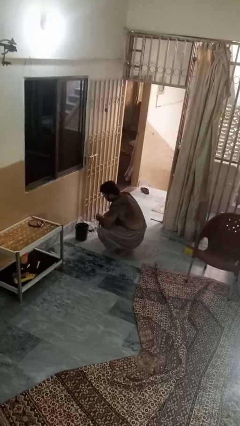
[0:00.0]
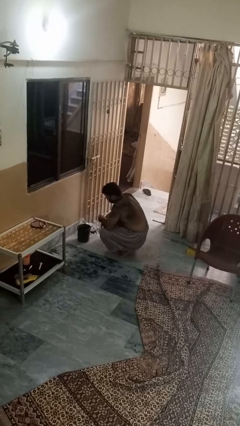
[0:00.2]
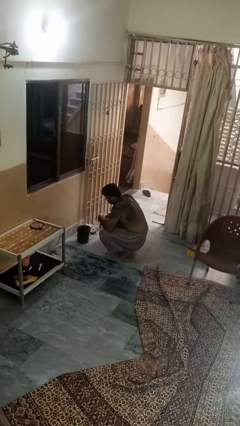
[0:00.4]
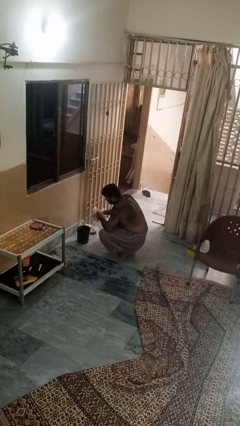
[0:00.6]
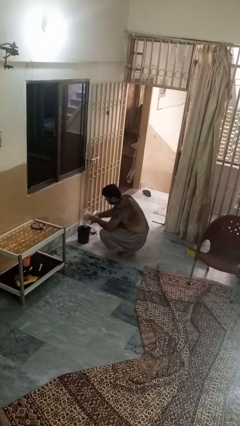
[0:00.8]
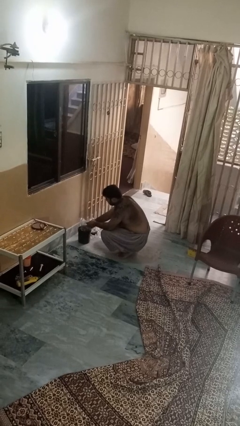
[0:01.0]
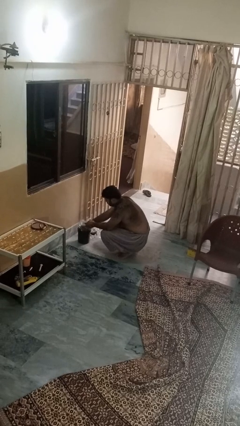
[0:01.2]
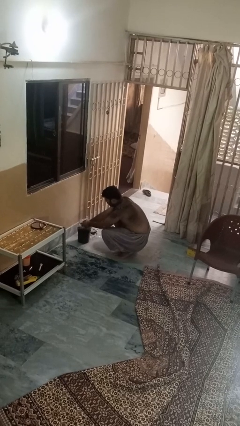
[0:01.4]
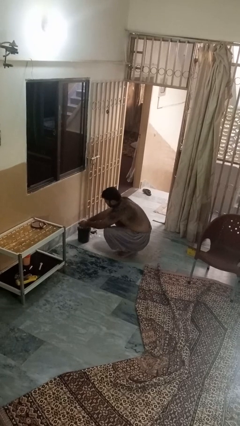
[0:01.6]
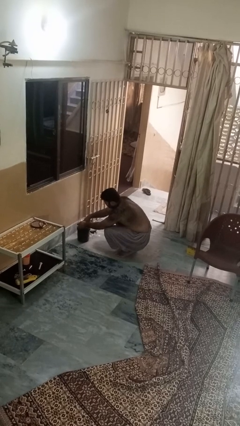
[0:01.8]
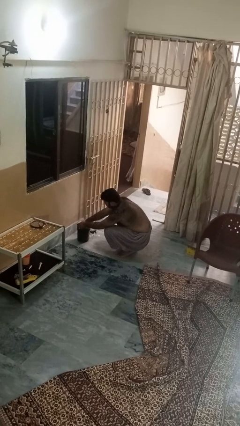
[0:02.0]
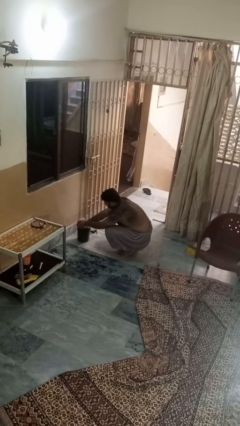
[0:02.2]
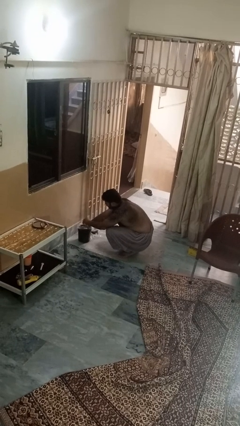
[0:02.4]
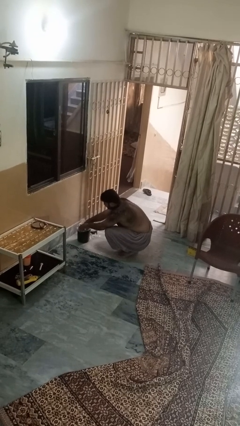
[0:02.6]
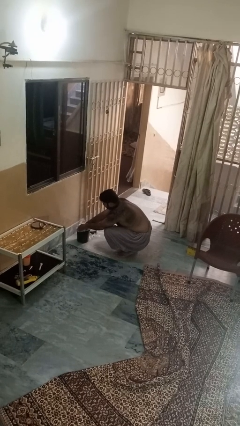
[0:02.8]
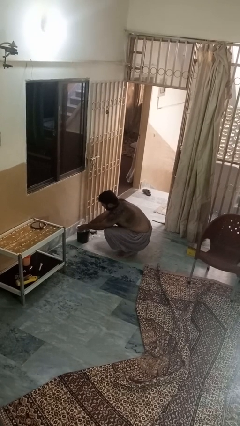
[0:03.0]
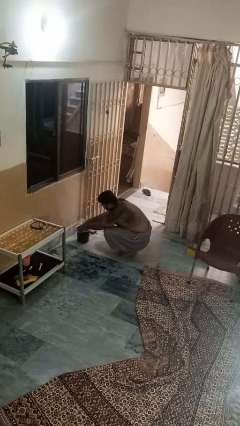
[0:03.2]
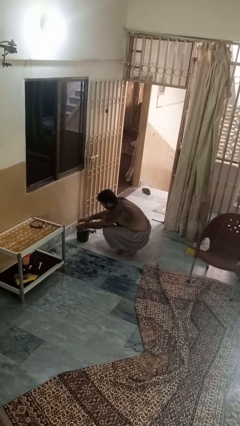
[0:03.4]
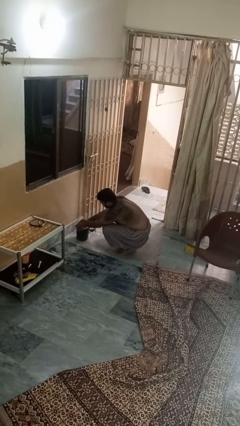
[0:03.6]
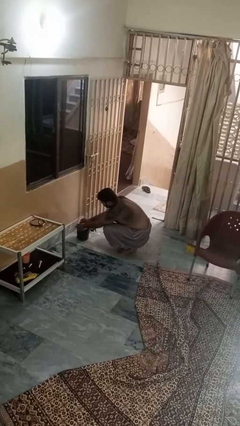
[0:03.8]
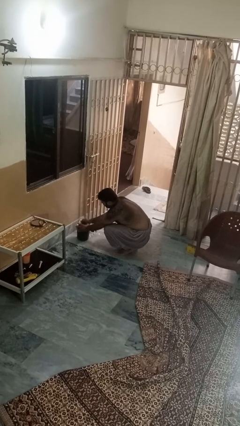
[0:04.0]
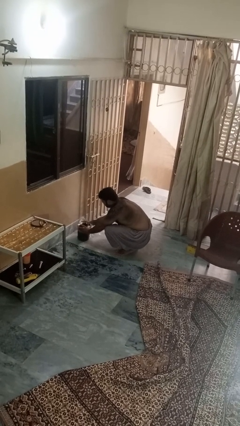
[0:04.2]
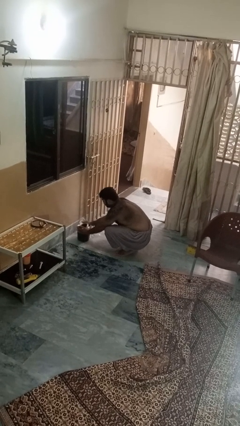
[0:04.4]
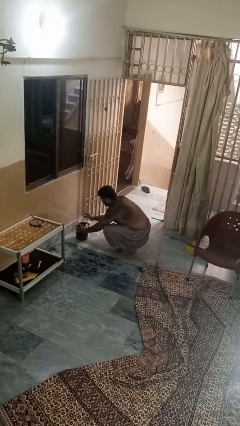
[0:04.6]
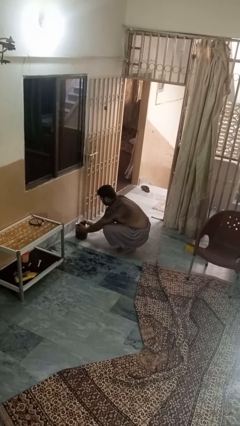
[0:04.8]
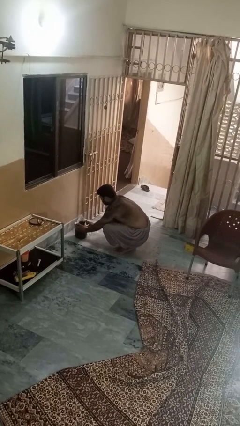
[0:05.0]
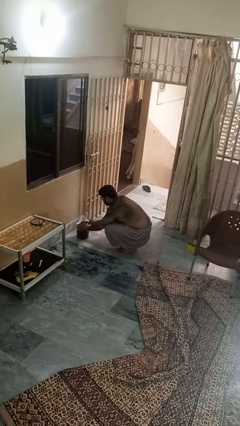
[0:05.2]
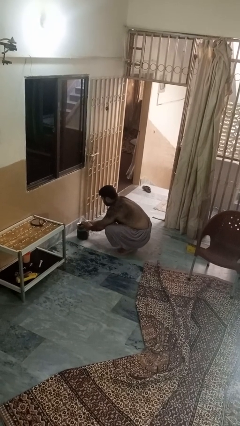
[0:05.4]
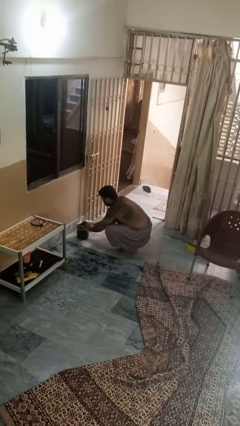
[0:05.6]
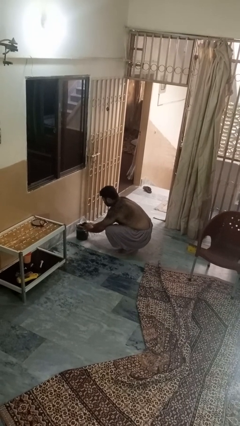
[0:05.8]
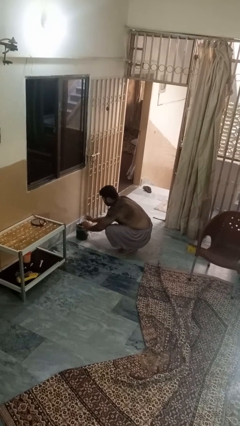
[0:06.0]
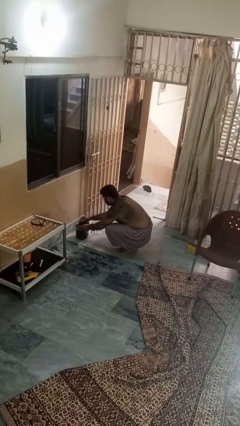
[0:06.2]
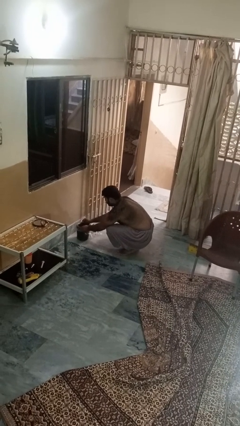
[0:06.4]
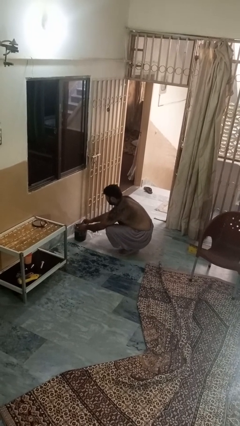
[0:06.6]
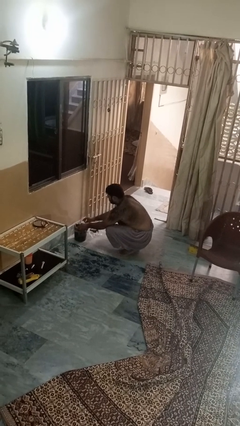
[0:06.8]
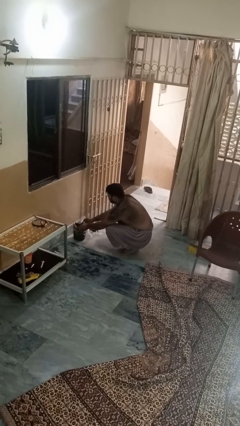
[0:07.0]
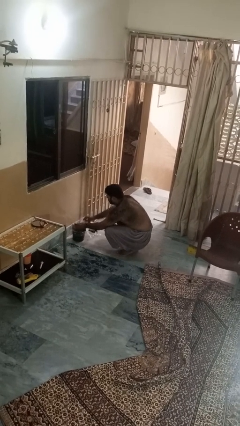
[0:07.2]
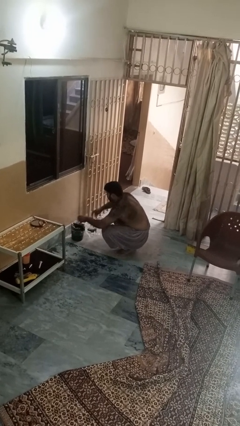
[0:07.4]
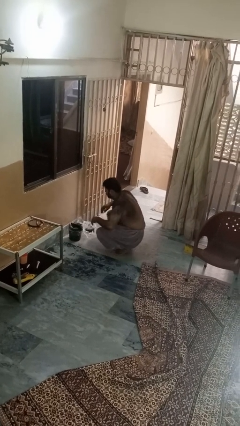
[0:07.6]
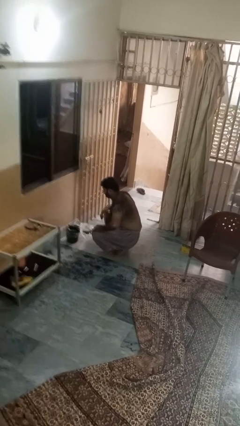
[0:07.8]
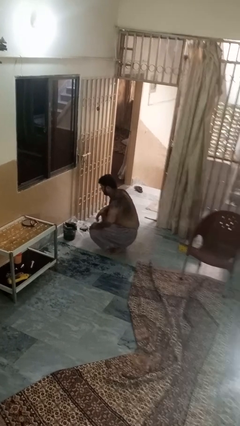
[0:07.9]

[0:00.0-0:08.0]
person inserts trashbag into trashcan

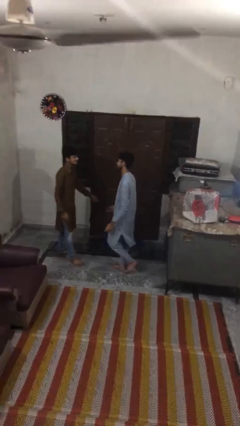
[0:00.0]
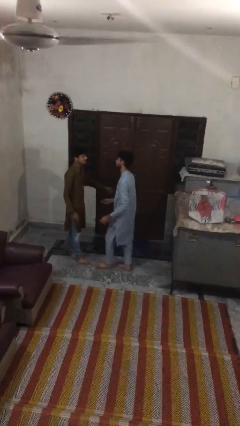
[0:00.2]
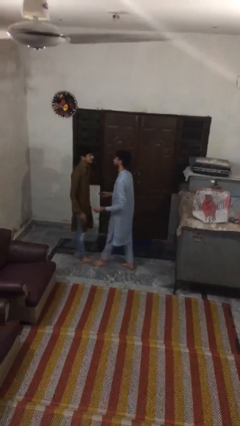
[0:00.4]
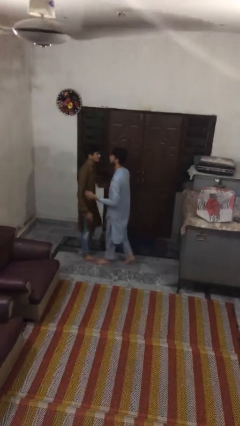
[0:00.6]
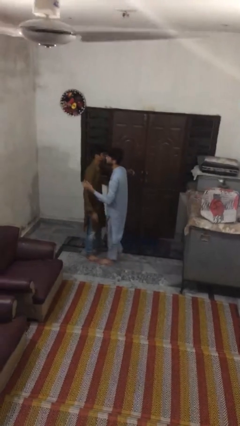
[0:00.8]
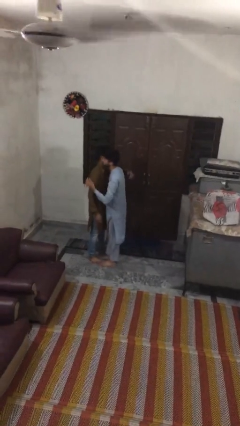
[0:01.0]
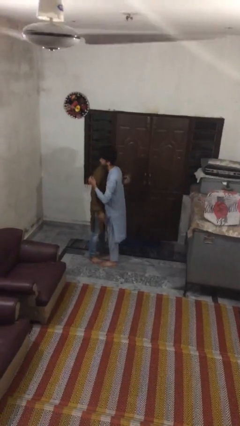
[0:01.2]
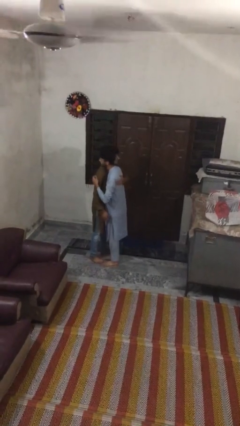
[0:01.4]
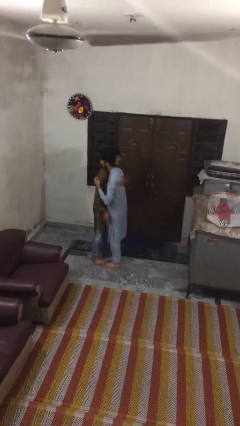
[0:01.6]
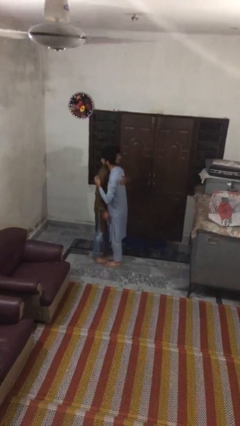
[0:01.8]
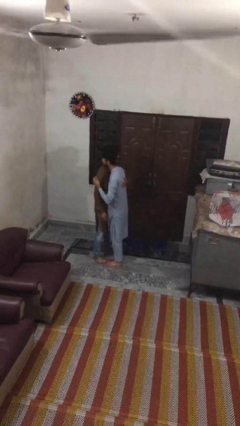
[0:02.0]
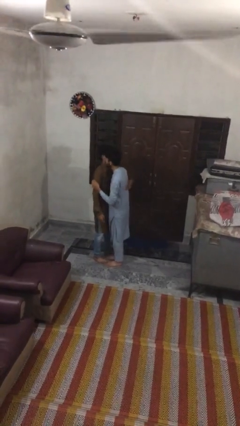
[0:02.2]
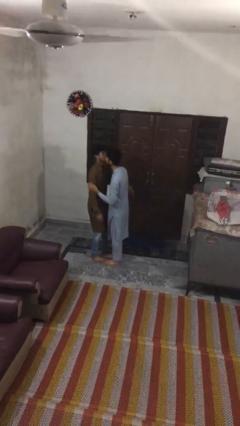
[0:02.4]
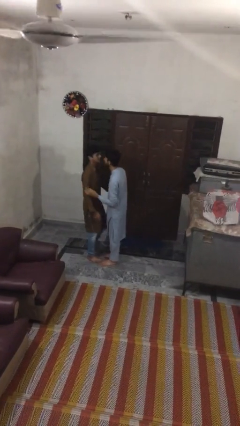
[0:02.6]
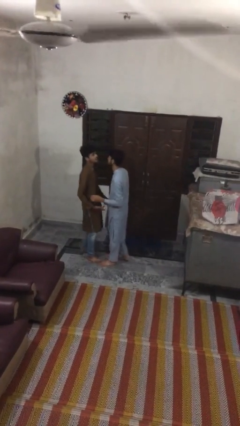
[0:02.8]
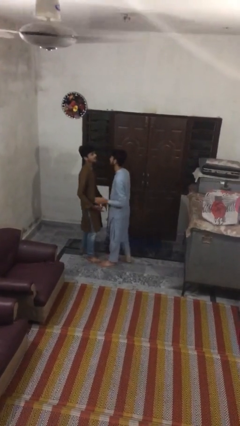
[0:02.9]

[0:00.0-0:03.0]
person embraces person

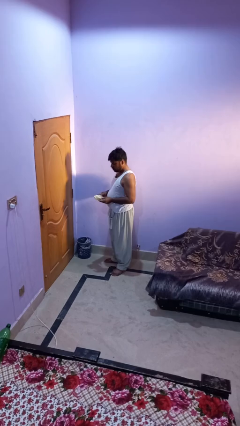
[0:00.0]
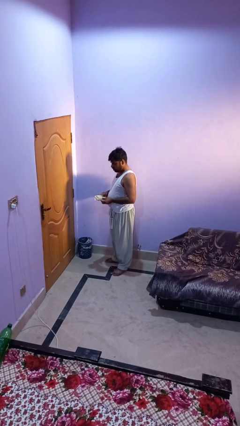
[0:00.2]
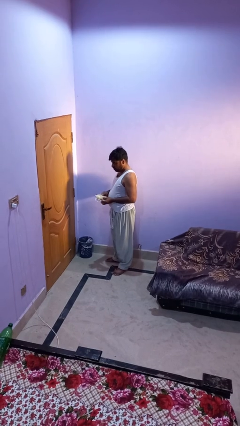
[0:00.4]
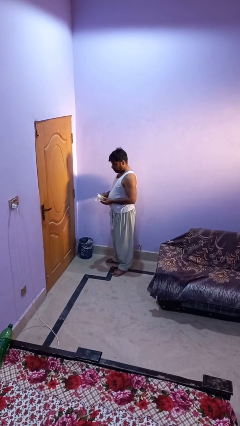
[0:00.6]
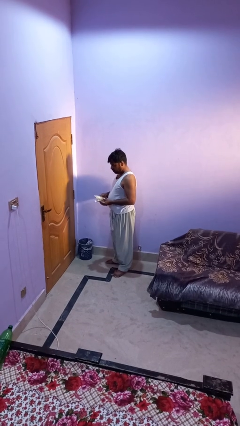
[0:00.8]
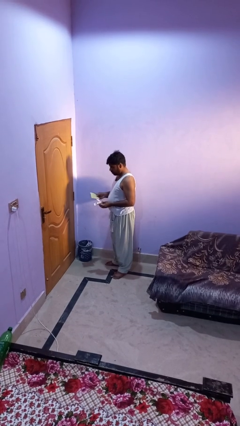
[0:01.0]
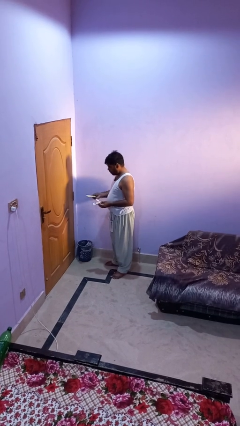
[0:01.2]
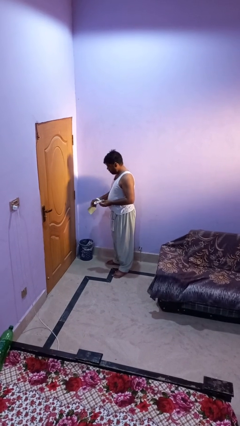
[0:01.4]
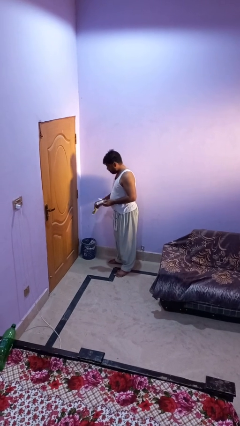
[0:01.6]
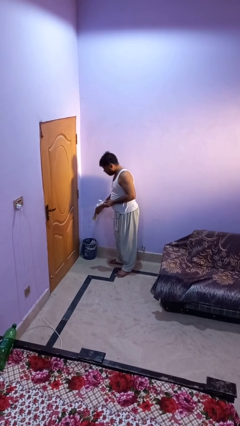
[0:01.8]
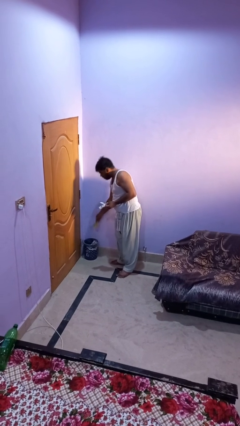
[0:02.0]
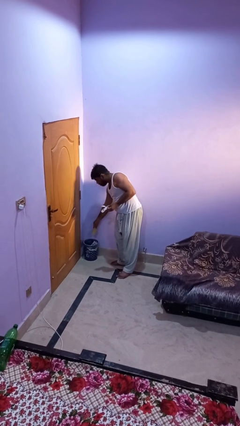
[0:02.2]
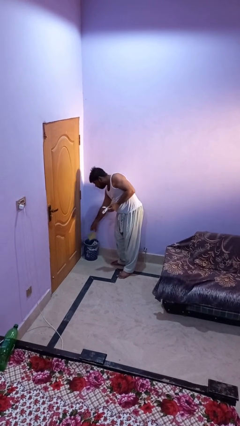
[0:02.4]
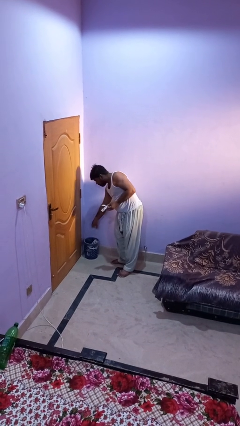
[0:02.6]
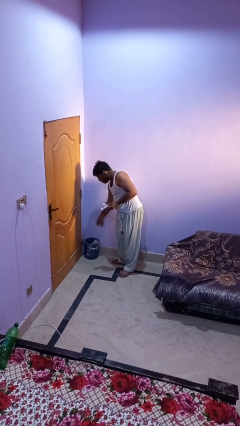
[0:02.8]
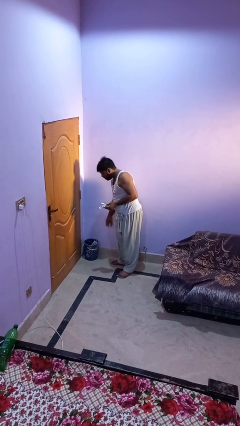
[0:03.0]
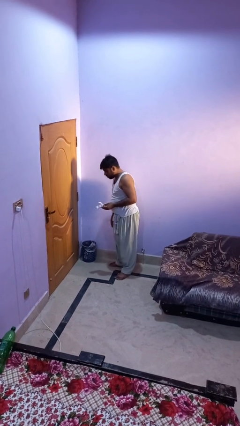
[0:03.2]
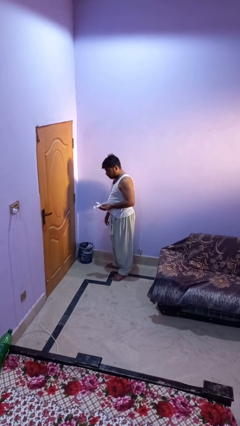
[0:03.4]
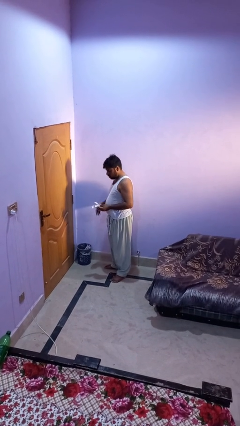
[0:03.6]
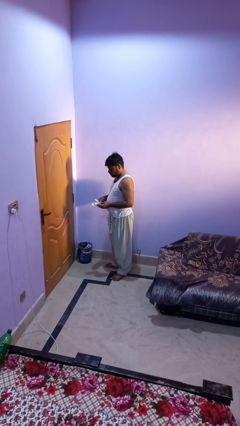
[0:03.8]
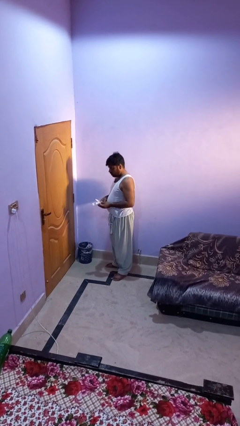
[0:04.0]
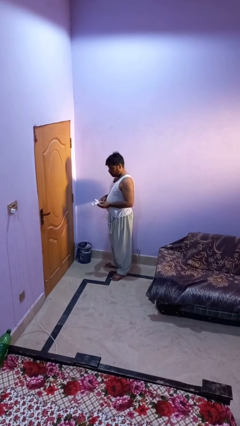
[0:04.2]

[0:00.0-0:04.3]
person discards trash

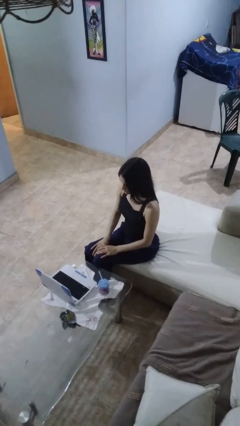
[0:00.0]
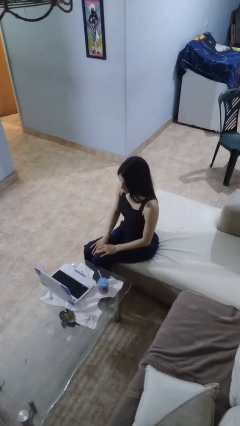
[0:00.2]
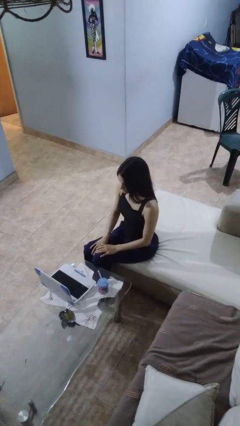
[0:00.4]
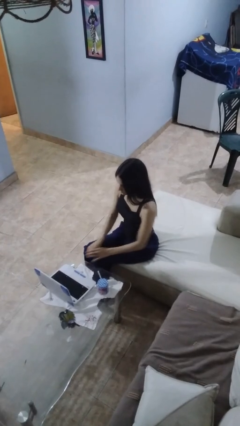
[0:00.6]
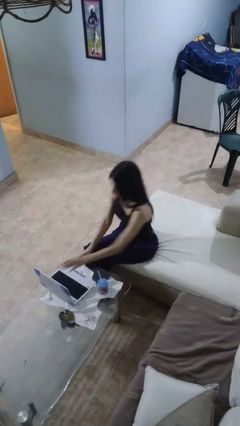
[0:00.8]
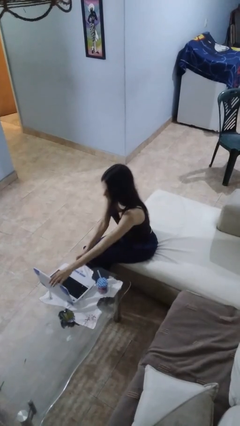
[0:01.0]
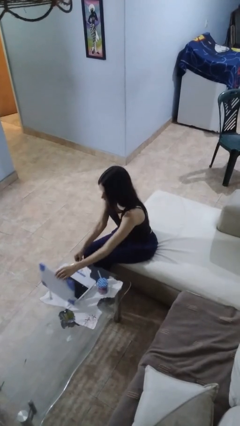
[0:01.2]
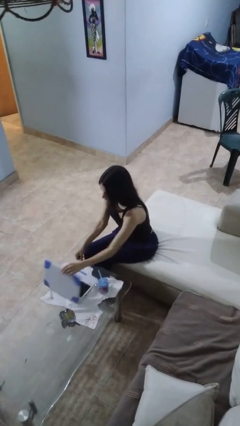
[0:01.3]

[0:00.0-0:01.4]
person closes laptop

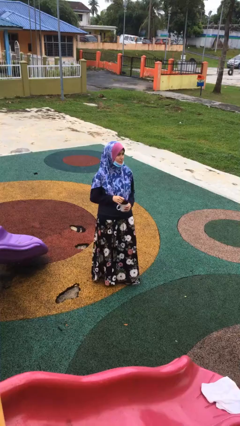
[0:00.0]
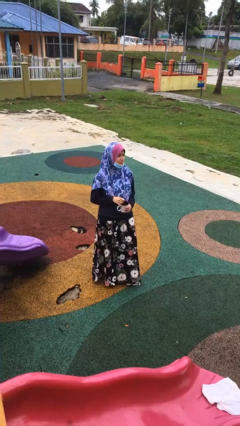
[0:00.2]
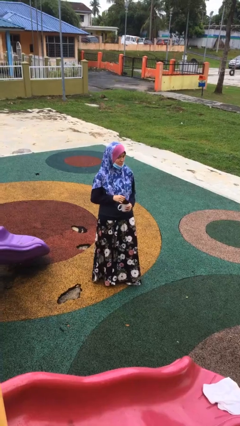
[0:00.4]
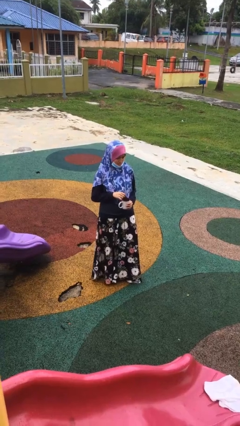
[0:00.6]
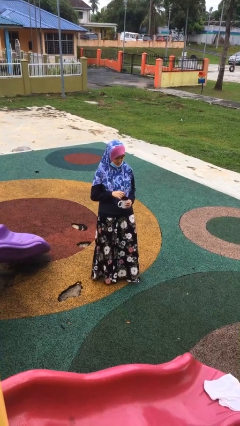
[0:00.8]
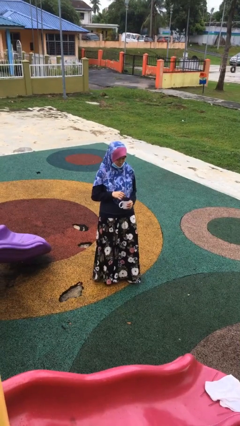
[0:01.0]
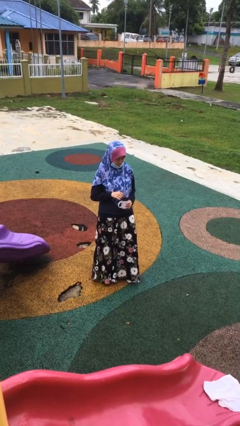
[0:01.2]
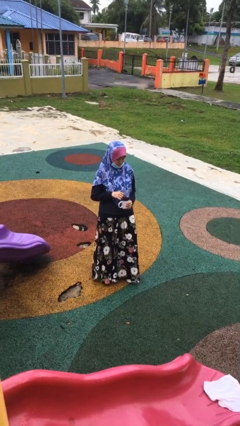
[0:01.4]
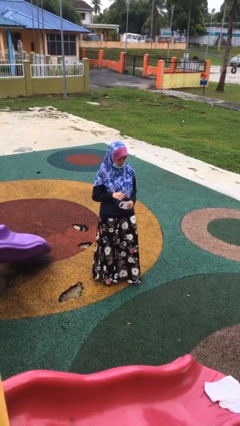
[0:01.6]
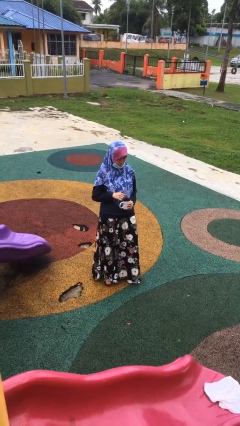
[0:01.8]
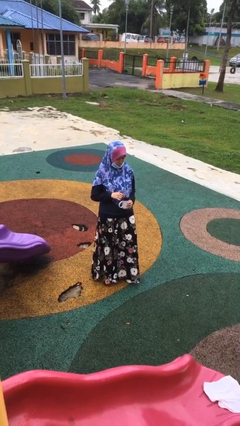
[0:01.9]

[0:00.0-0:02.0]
person stirs mug
